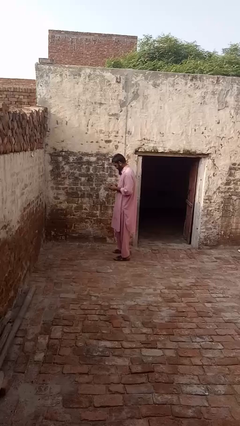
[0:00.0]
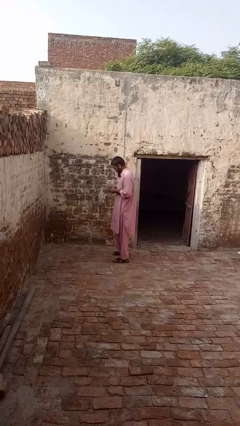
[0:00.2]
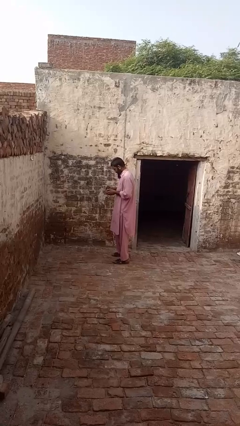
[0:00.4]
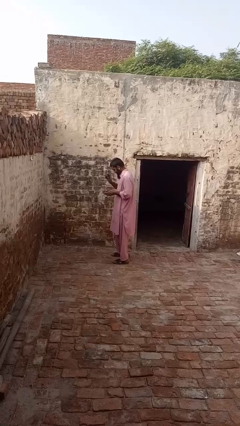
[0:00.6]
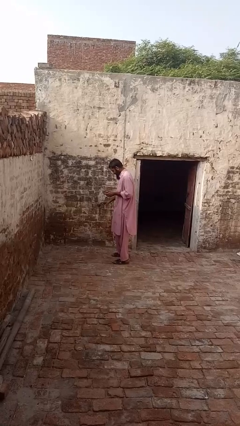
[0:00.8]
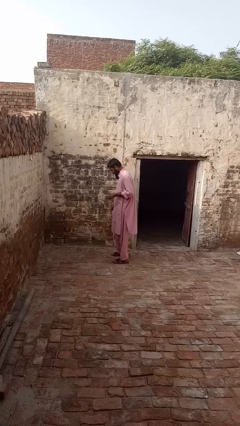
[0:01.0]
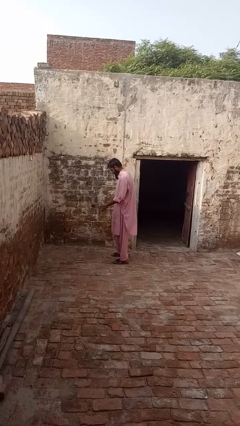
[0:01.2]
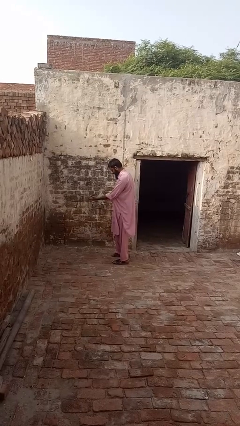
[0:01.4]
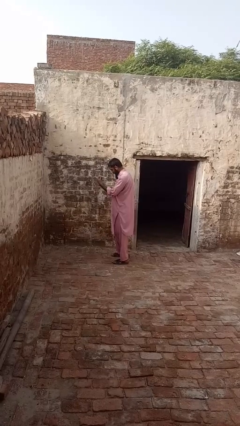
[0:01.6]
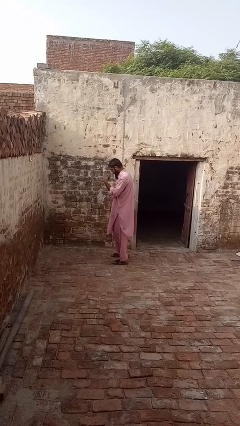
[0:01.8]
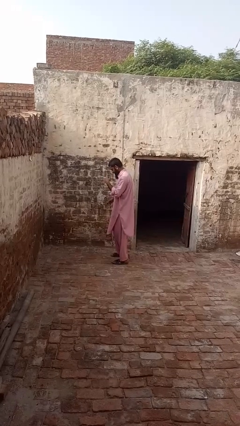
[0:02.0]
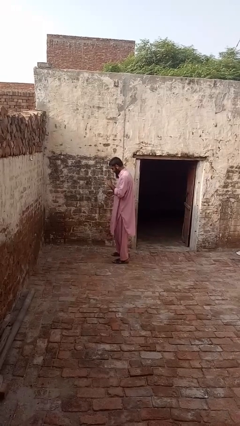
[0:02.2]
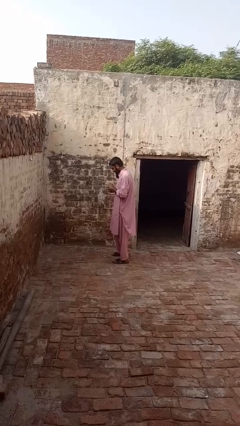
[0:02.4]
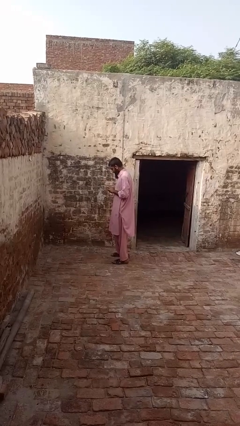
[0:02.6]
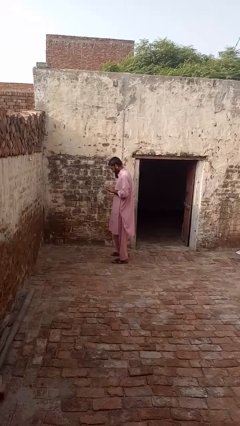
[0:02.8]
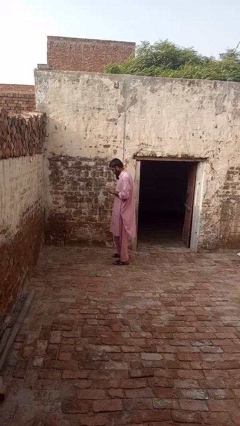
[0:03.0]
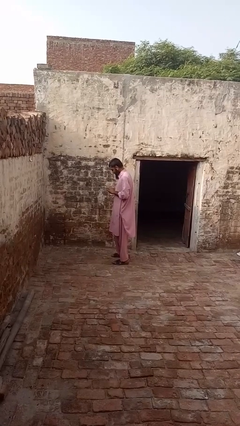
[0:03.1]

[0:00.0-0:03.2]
person bounces ball on floor

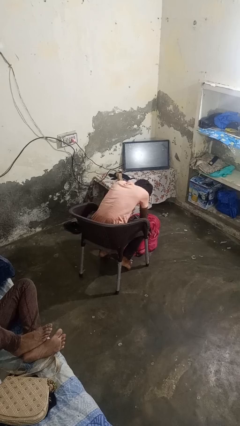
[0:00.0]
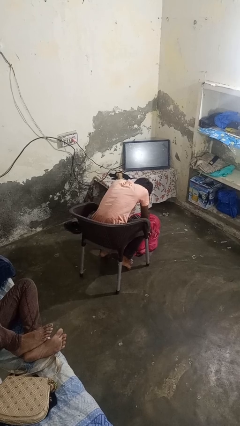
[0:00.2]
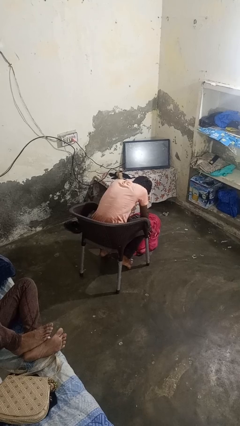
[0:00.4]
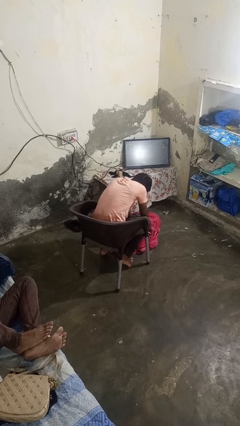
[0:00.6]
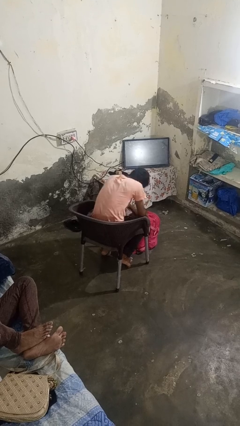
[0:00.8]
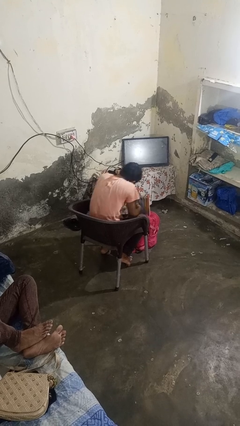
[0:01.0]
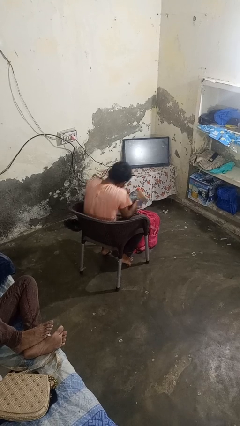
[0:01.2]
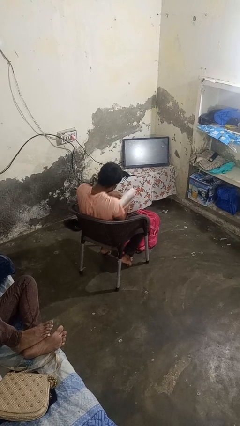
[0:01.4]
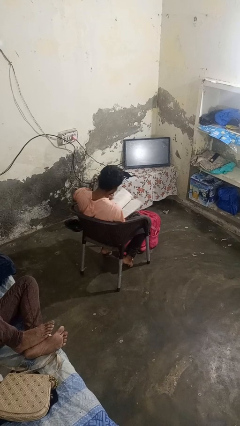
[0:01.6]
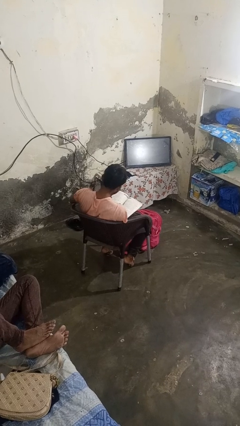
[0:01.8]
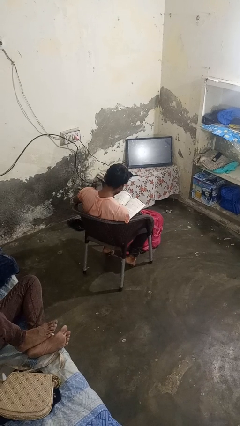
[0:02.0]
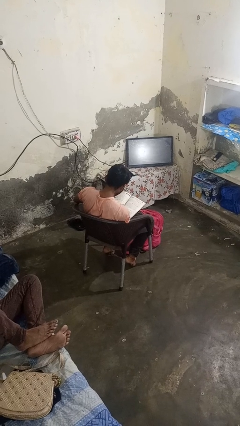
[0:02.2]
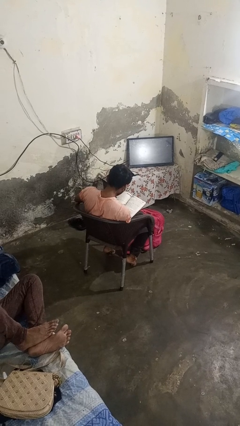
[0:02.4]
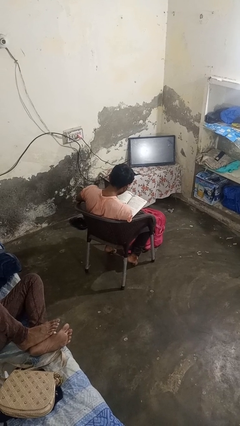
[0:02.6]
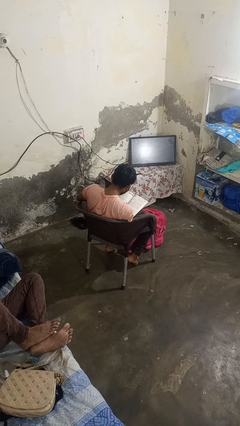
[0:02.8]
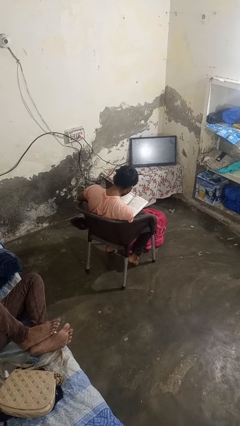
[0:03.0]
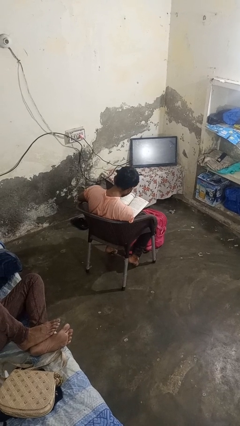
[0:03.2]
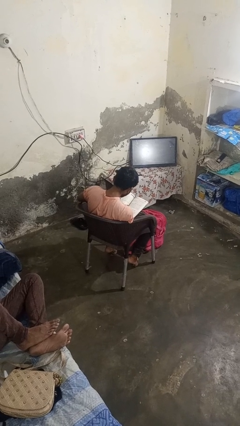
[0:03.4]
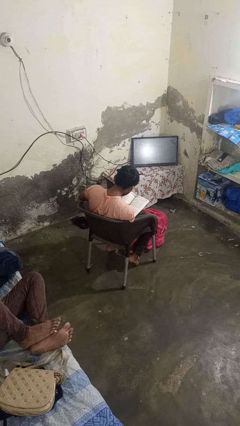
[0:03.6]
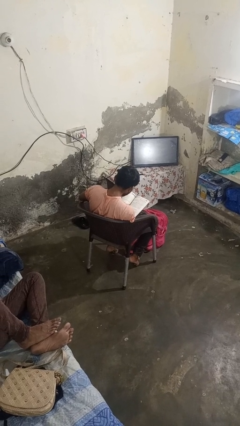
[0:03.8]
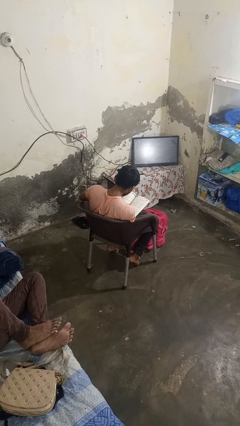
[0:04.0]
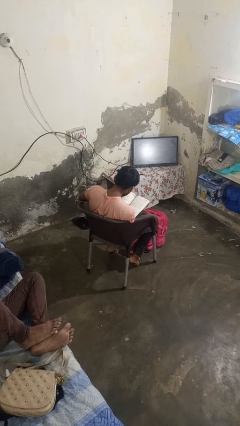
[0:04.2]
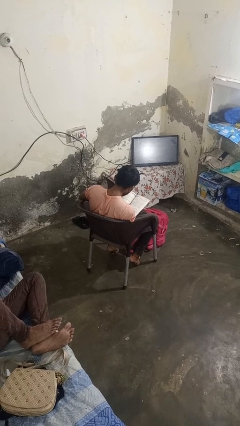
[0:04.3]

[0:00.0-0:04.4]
person takes object from backpack

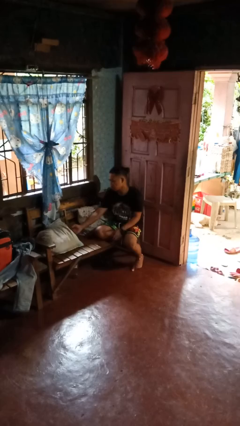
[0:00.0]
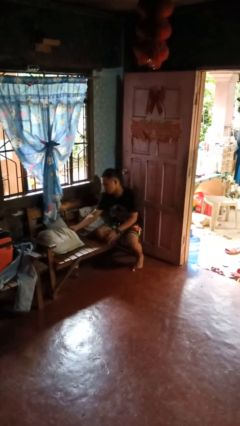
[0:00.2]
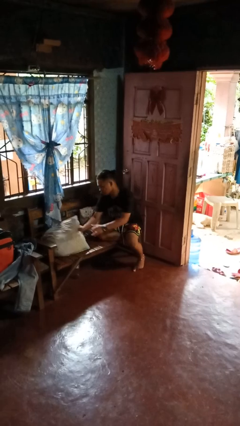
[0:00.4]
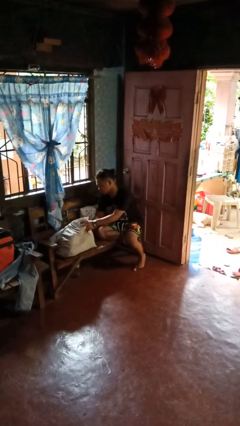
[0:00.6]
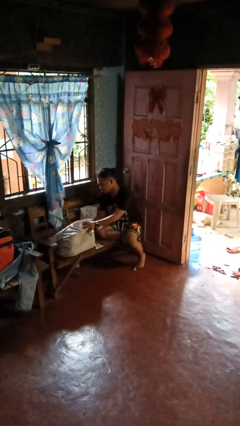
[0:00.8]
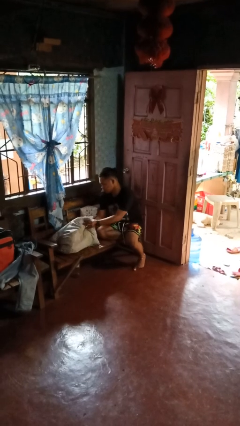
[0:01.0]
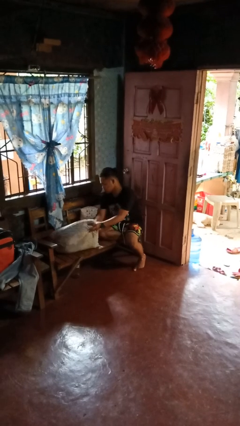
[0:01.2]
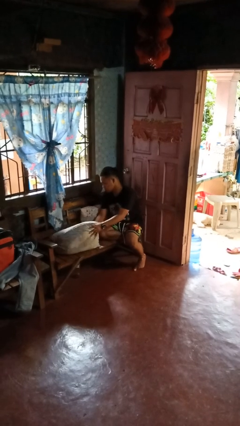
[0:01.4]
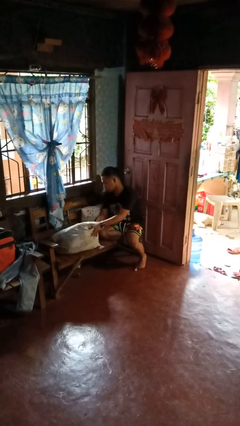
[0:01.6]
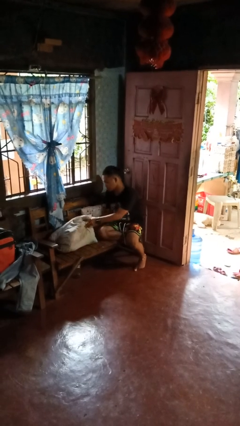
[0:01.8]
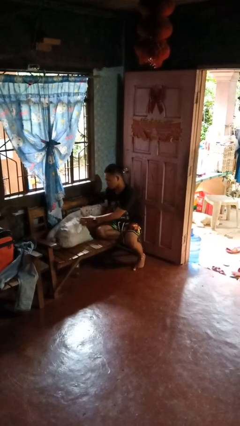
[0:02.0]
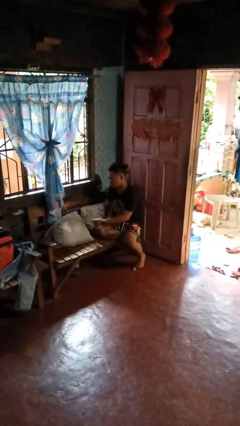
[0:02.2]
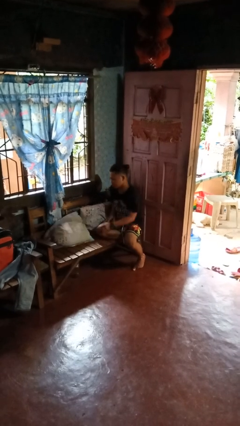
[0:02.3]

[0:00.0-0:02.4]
person searches in couch

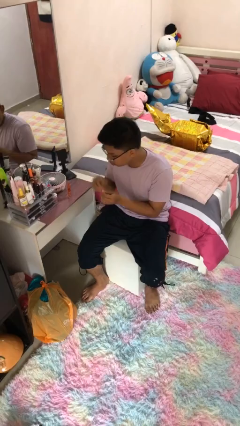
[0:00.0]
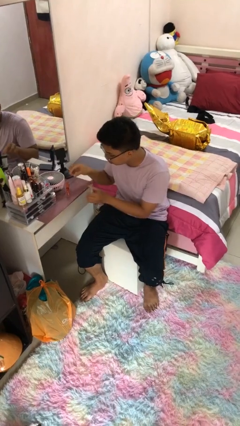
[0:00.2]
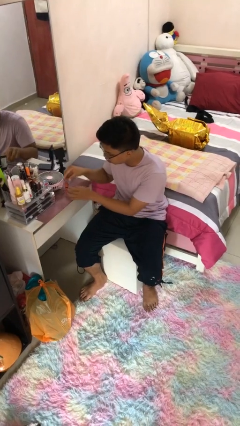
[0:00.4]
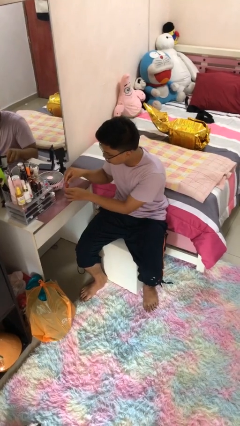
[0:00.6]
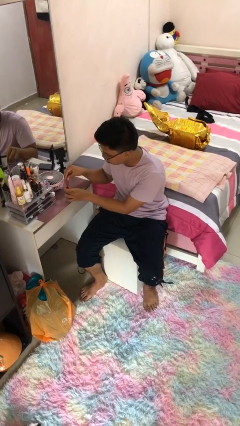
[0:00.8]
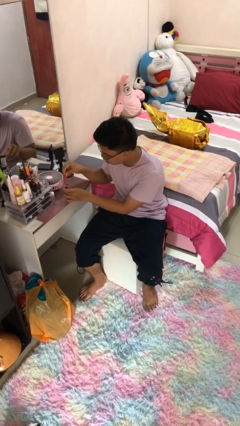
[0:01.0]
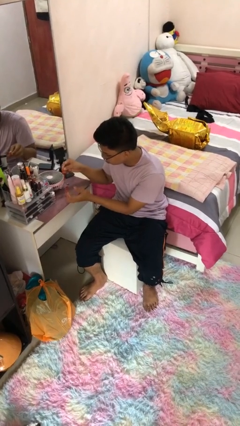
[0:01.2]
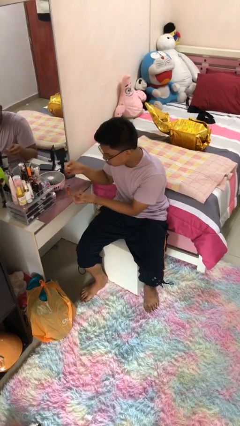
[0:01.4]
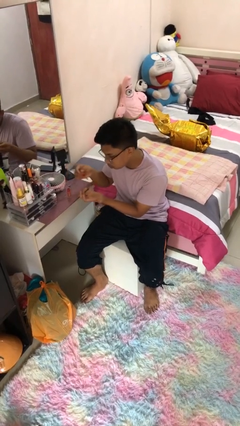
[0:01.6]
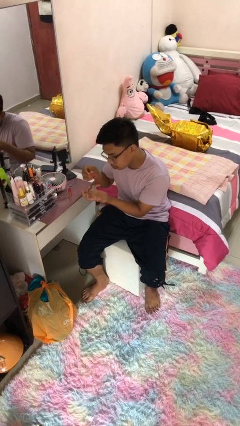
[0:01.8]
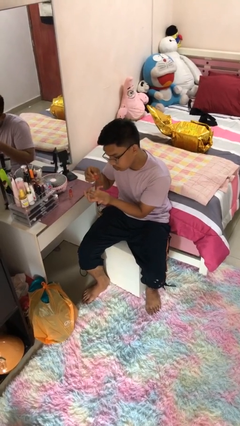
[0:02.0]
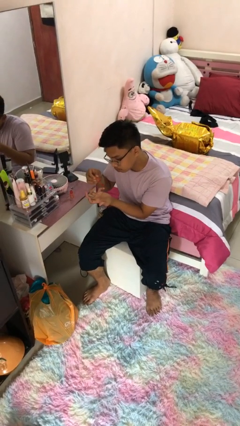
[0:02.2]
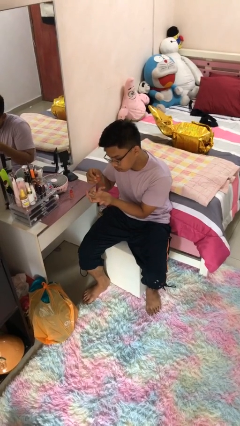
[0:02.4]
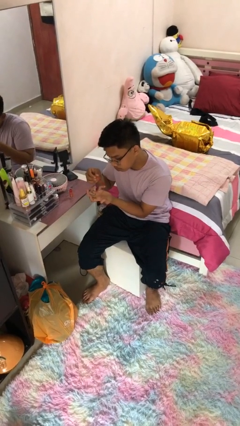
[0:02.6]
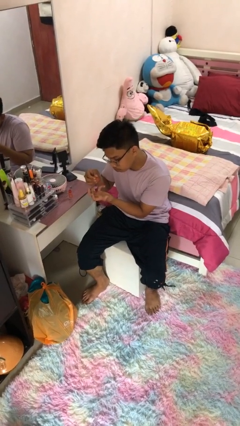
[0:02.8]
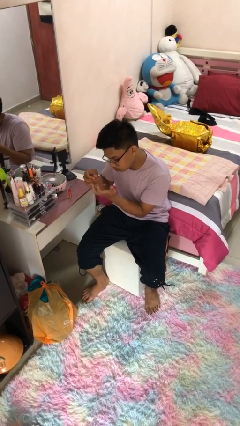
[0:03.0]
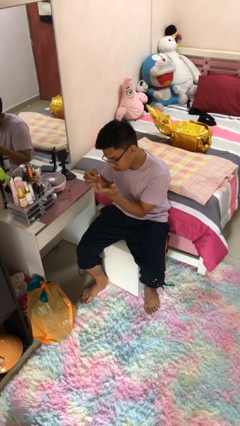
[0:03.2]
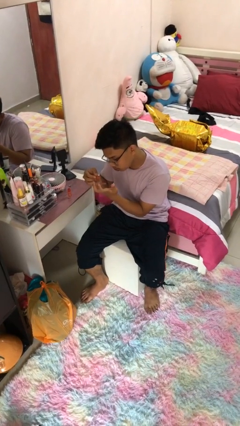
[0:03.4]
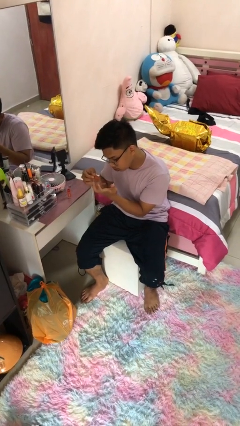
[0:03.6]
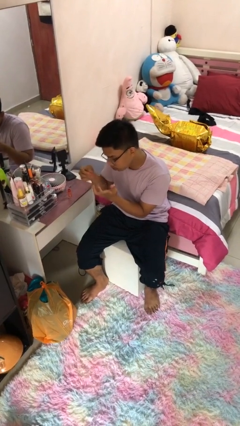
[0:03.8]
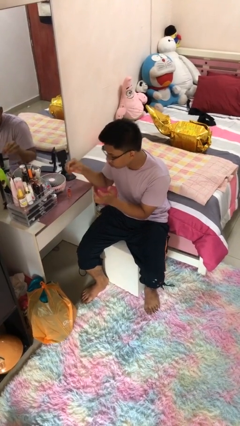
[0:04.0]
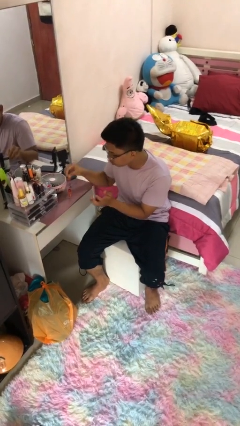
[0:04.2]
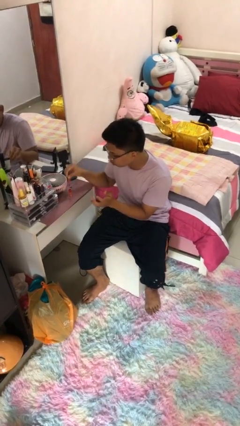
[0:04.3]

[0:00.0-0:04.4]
person paints fingernails

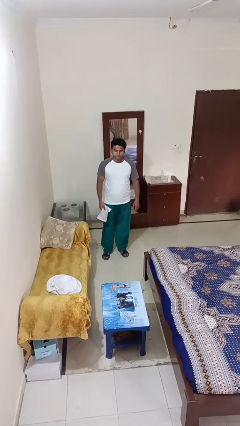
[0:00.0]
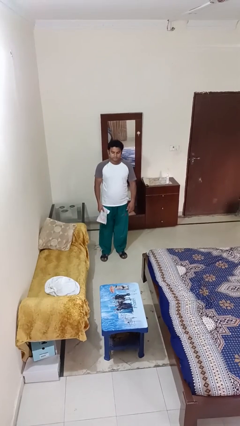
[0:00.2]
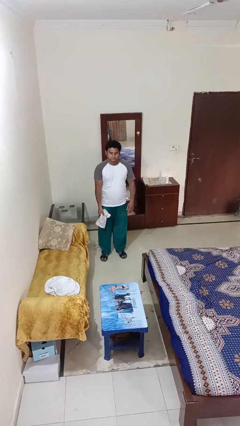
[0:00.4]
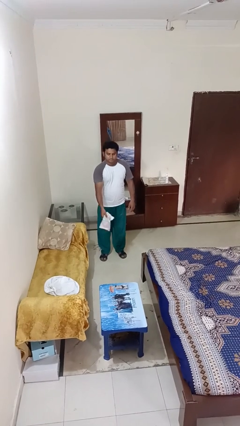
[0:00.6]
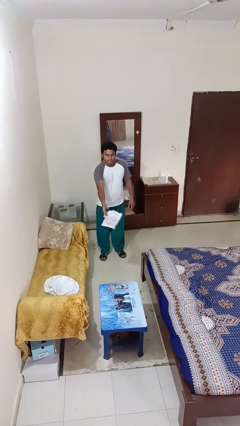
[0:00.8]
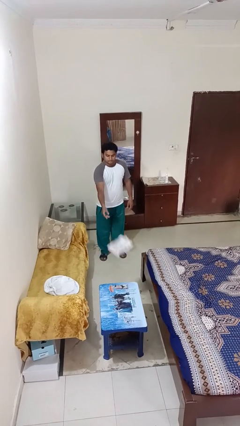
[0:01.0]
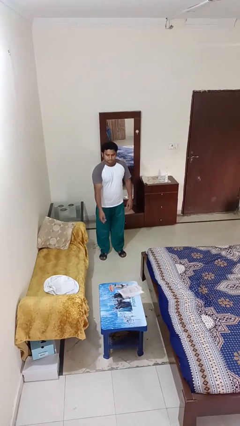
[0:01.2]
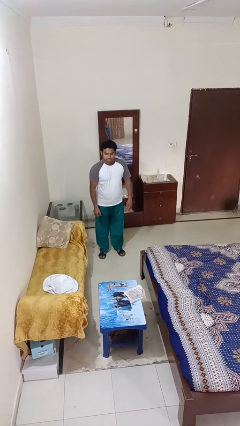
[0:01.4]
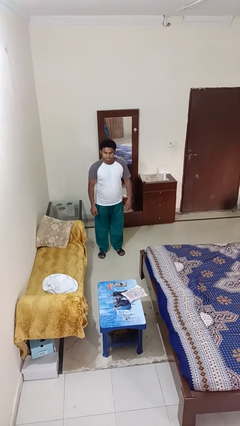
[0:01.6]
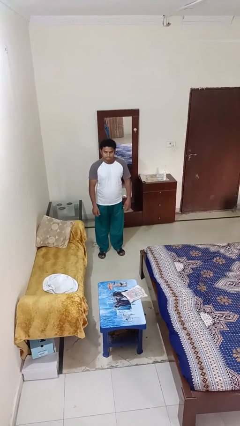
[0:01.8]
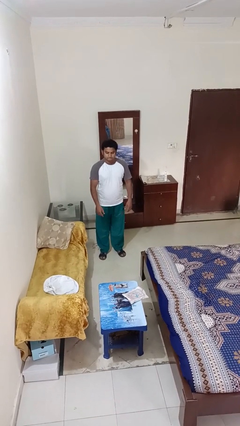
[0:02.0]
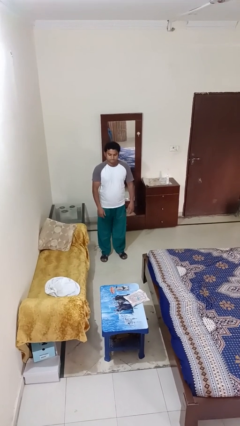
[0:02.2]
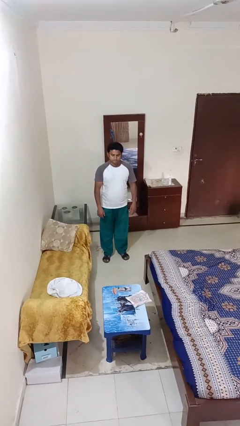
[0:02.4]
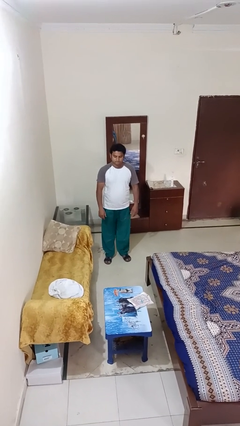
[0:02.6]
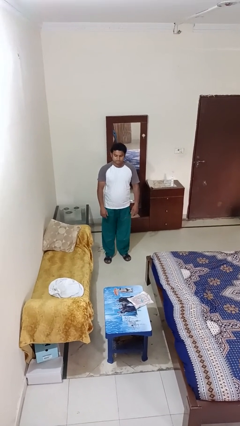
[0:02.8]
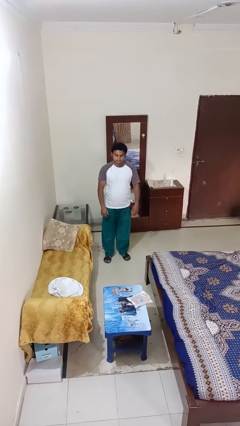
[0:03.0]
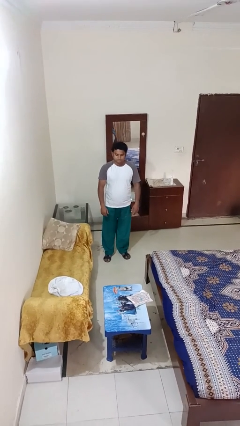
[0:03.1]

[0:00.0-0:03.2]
person throws object on table

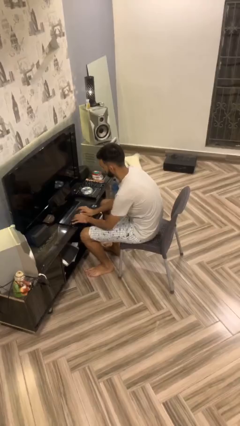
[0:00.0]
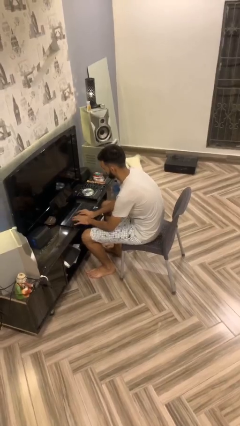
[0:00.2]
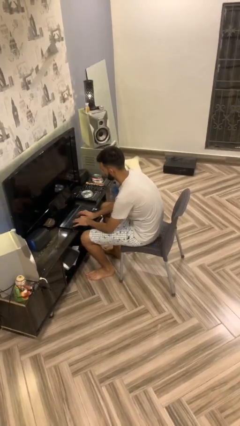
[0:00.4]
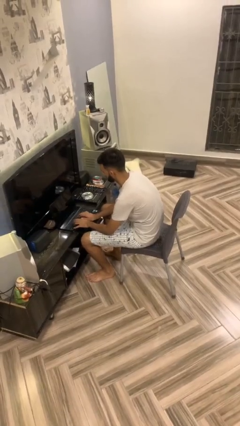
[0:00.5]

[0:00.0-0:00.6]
person stands up
